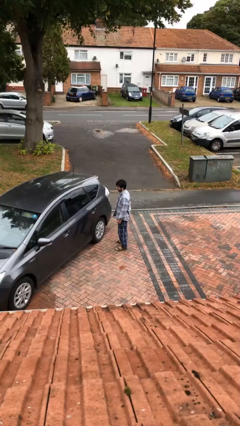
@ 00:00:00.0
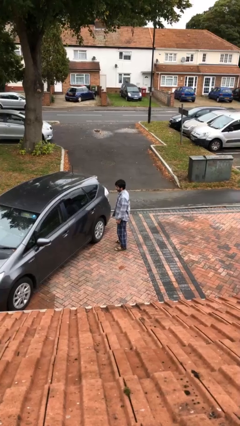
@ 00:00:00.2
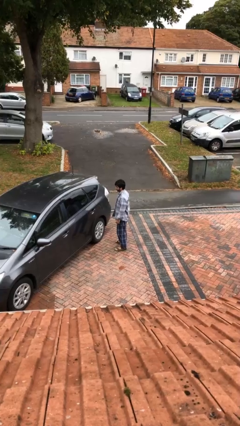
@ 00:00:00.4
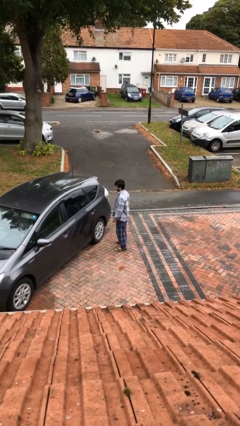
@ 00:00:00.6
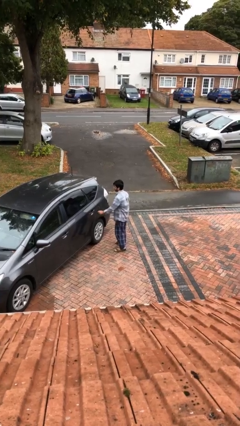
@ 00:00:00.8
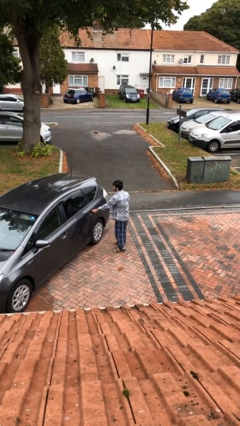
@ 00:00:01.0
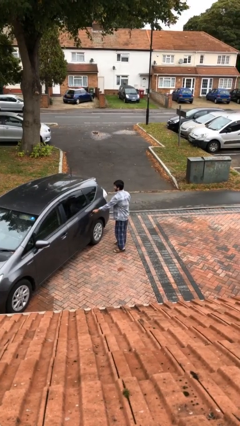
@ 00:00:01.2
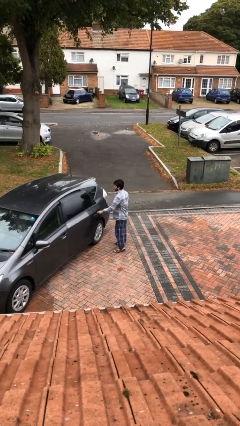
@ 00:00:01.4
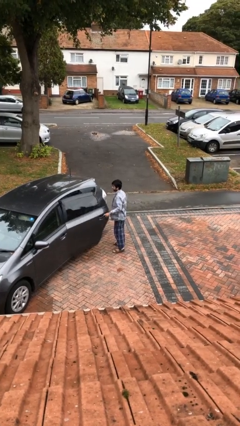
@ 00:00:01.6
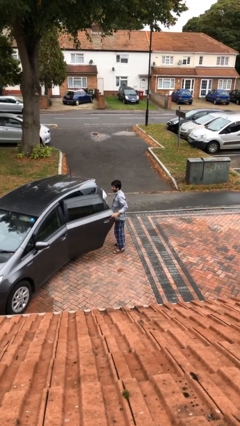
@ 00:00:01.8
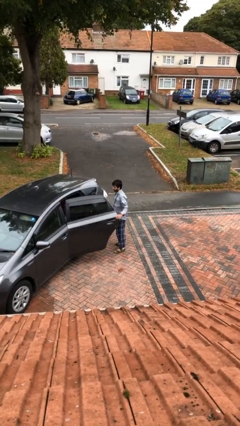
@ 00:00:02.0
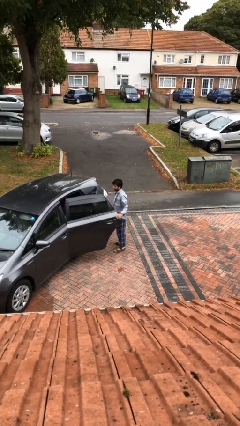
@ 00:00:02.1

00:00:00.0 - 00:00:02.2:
person opens car door

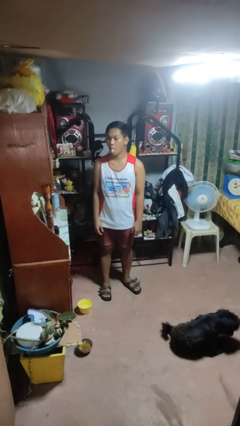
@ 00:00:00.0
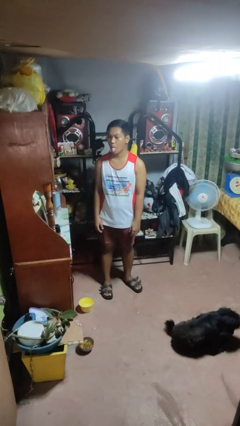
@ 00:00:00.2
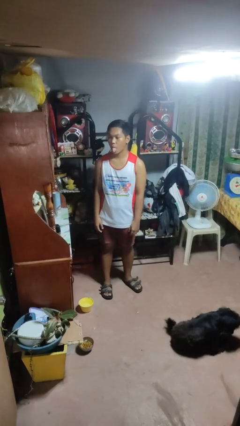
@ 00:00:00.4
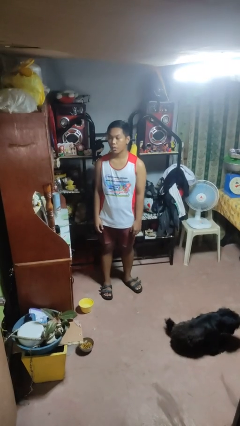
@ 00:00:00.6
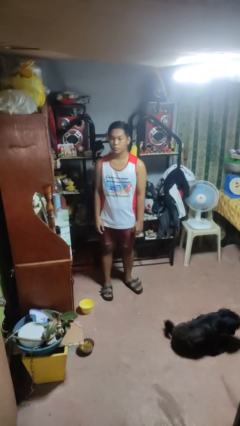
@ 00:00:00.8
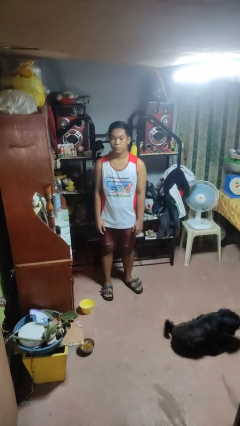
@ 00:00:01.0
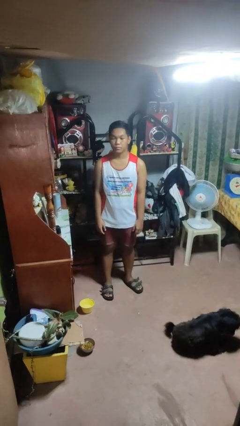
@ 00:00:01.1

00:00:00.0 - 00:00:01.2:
person sticks out tongue

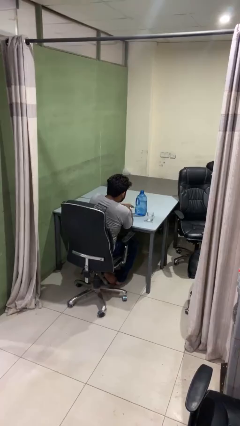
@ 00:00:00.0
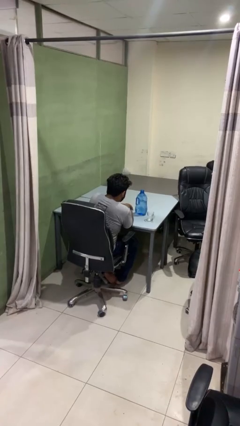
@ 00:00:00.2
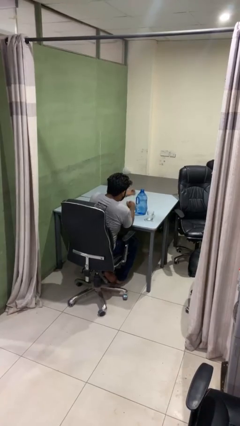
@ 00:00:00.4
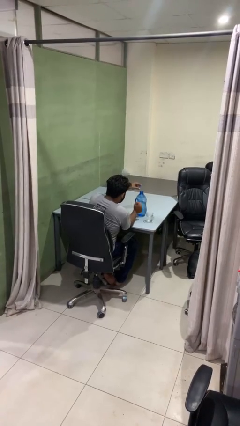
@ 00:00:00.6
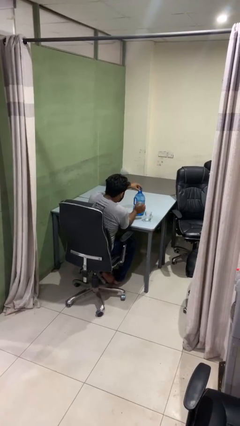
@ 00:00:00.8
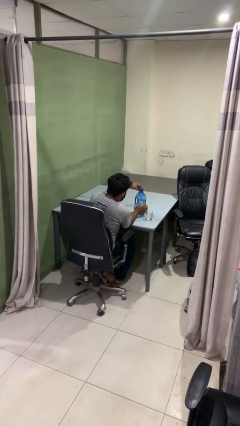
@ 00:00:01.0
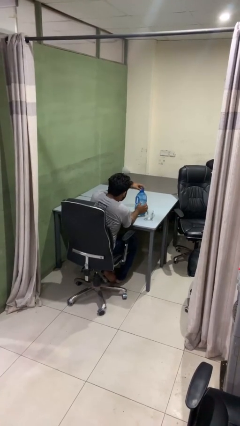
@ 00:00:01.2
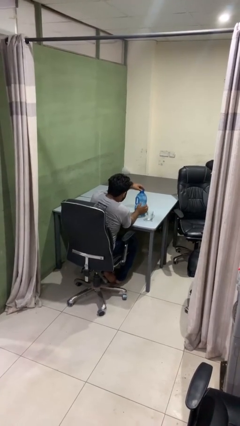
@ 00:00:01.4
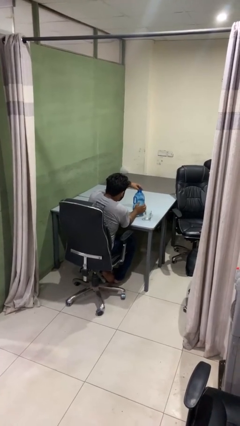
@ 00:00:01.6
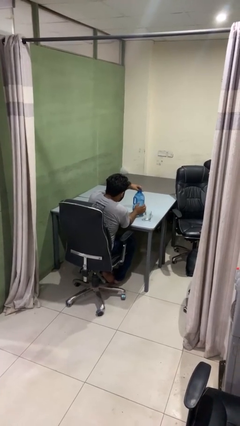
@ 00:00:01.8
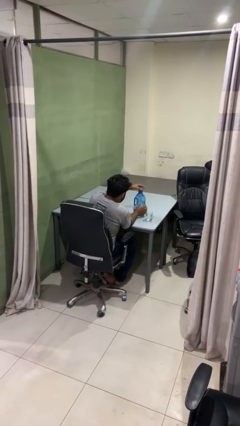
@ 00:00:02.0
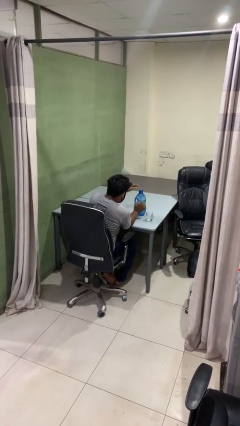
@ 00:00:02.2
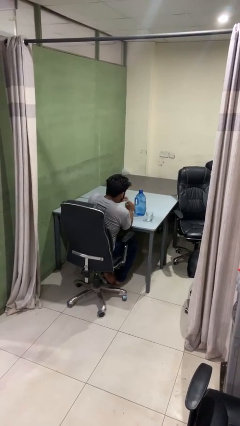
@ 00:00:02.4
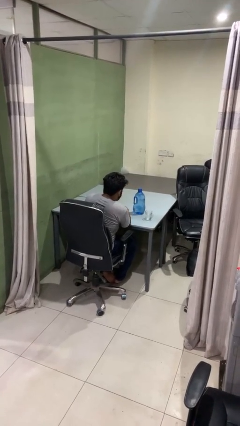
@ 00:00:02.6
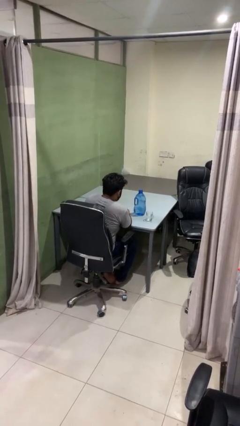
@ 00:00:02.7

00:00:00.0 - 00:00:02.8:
person screws lid to bottle

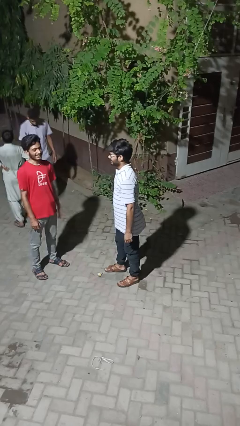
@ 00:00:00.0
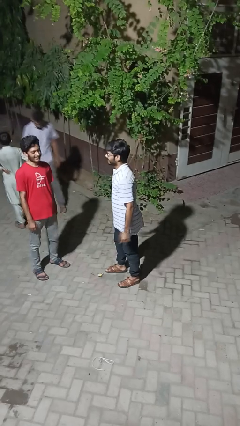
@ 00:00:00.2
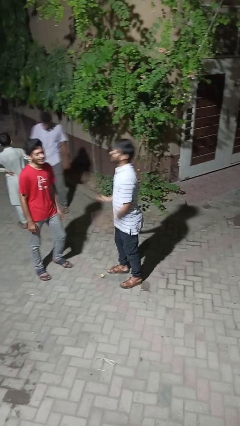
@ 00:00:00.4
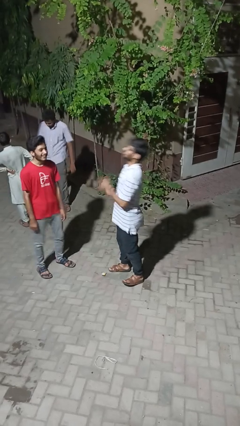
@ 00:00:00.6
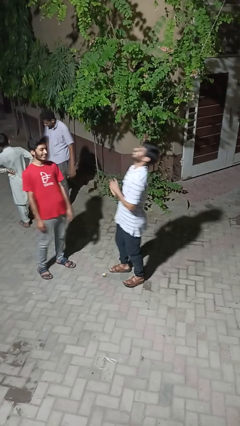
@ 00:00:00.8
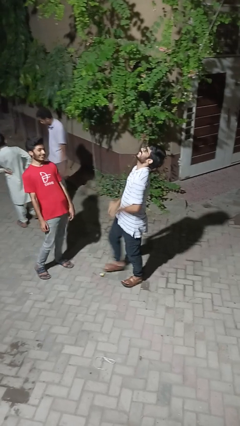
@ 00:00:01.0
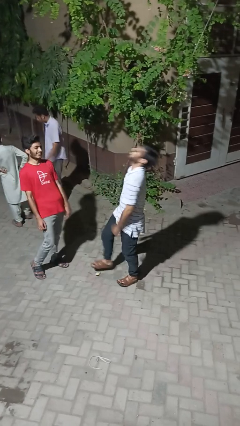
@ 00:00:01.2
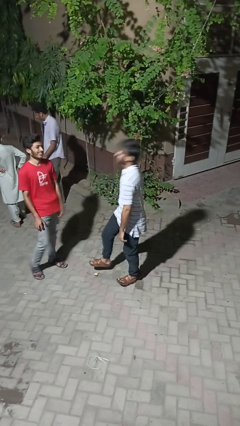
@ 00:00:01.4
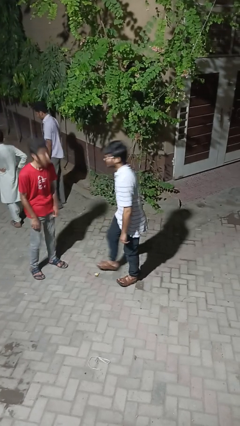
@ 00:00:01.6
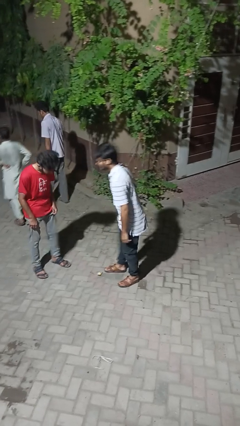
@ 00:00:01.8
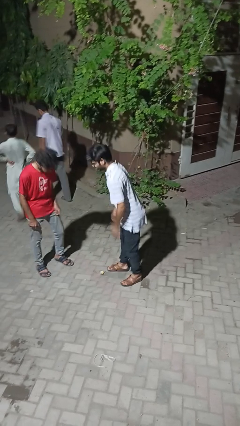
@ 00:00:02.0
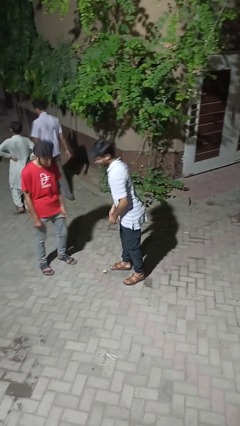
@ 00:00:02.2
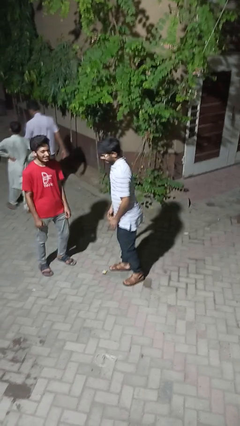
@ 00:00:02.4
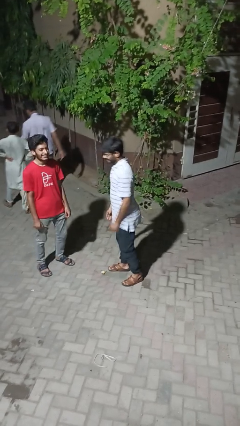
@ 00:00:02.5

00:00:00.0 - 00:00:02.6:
person laughs with person

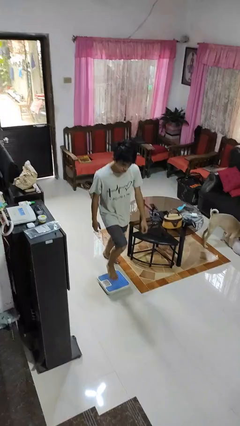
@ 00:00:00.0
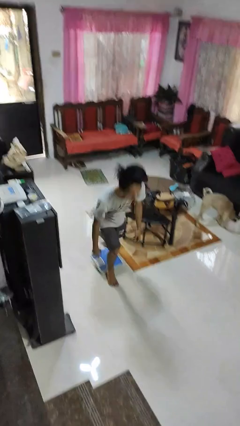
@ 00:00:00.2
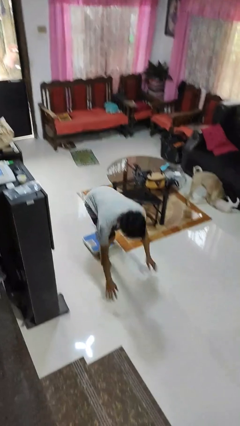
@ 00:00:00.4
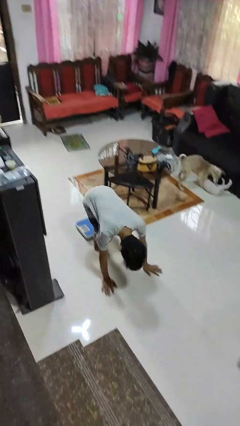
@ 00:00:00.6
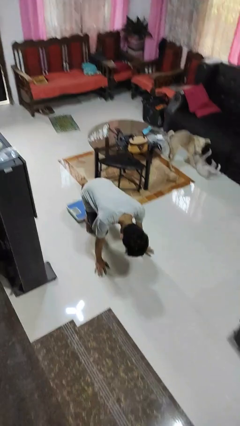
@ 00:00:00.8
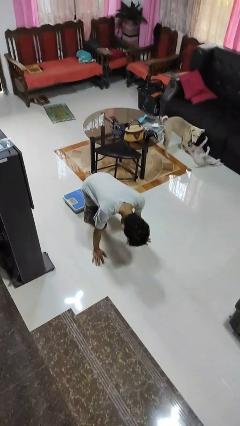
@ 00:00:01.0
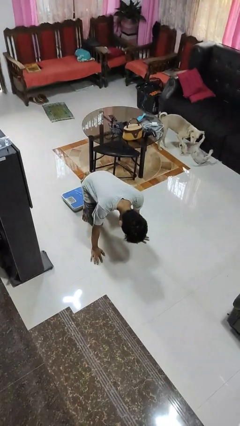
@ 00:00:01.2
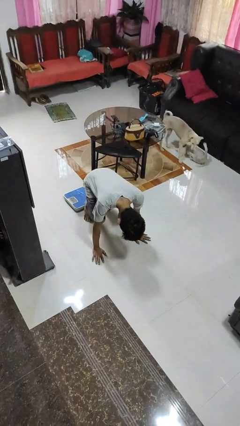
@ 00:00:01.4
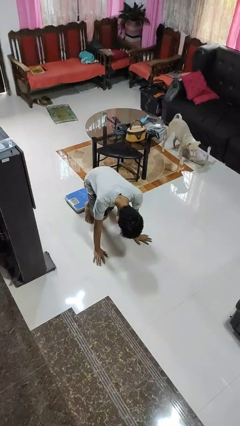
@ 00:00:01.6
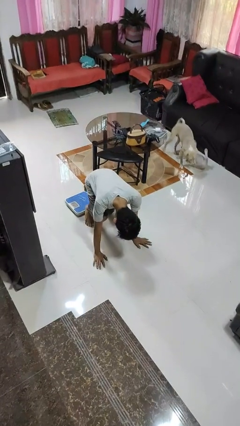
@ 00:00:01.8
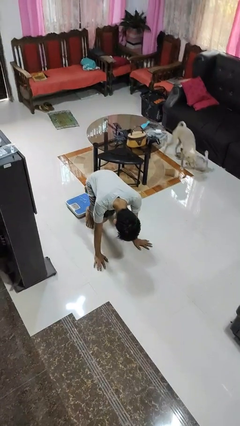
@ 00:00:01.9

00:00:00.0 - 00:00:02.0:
person trips on object on floor

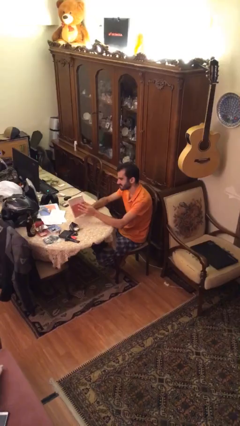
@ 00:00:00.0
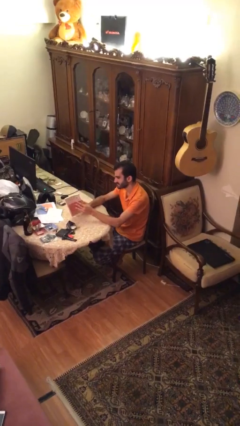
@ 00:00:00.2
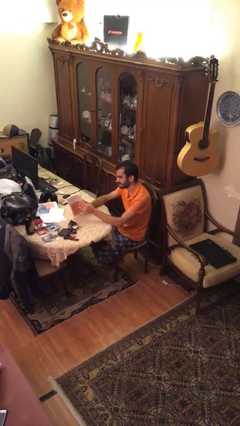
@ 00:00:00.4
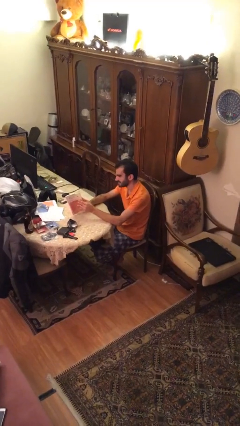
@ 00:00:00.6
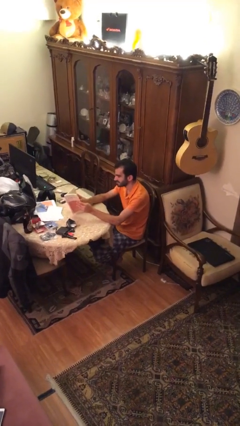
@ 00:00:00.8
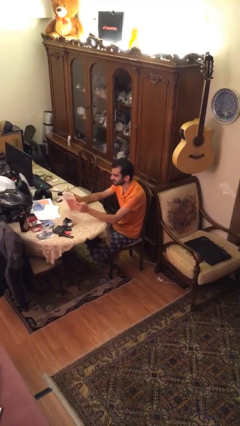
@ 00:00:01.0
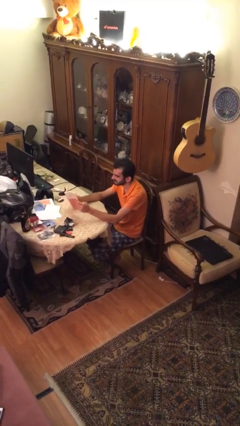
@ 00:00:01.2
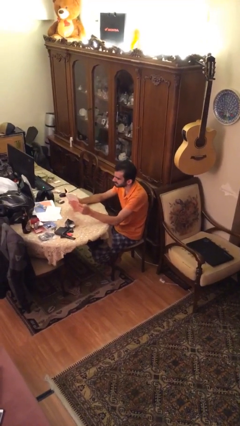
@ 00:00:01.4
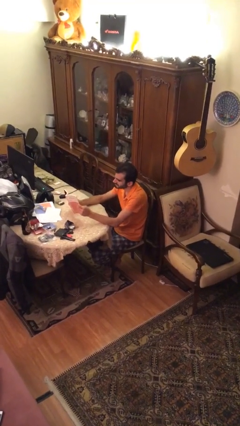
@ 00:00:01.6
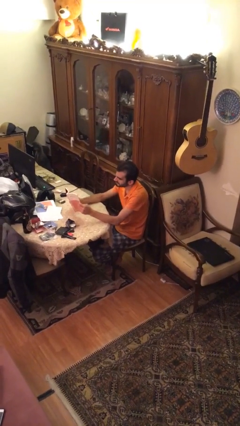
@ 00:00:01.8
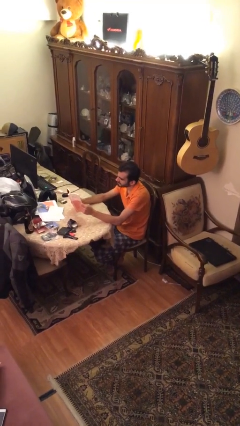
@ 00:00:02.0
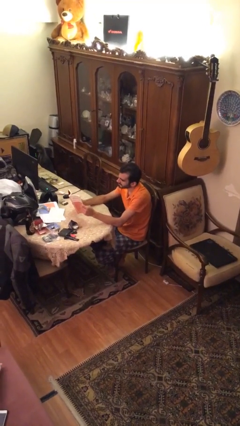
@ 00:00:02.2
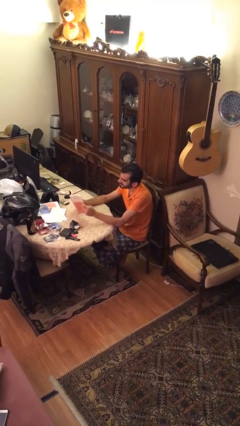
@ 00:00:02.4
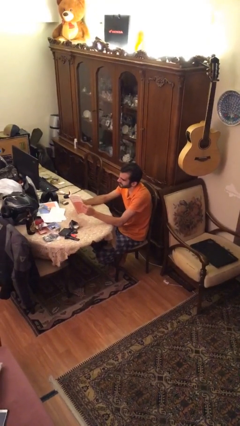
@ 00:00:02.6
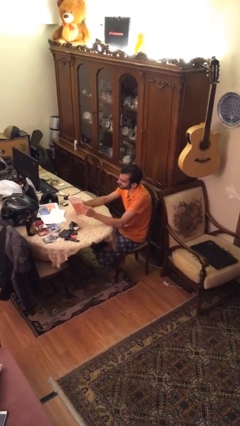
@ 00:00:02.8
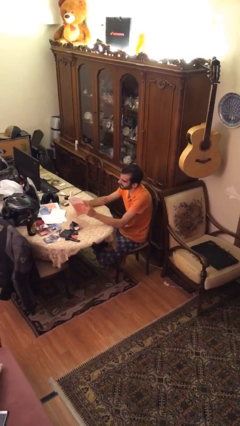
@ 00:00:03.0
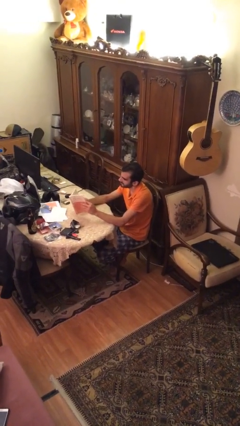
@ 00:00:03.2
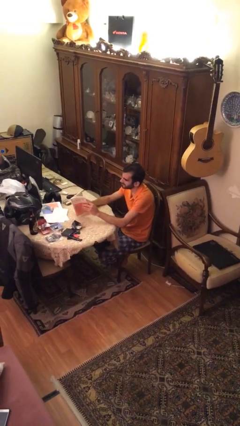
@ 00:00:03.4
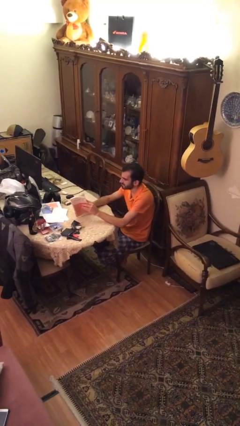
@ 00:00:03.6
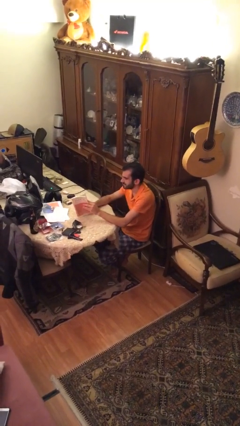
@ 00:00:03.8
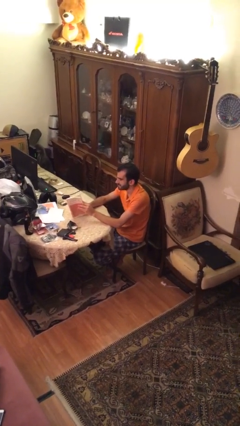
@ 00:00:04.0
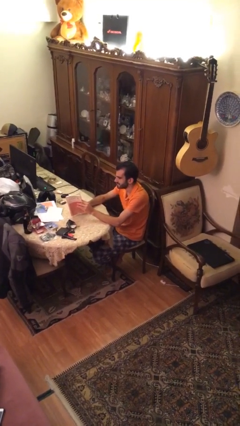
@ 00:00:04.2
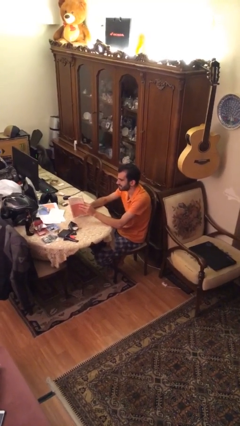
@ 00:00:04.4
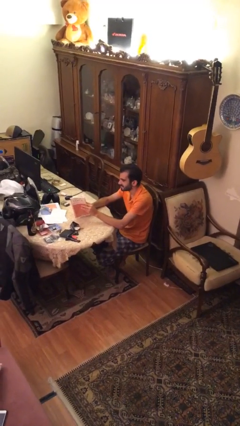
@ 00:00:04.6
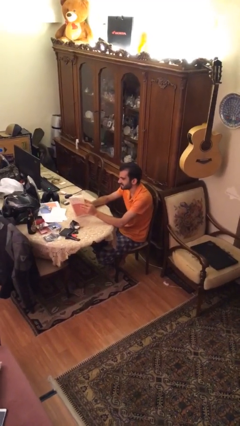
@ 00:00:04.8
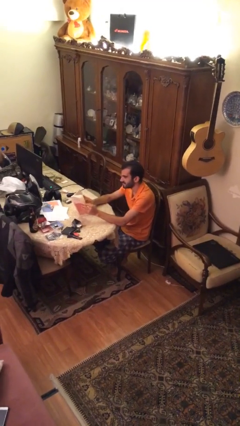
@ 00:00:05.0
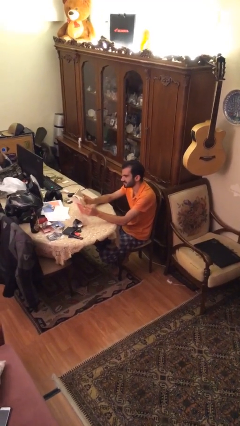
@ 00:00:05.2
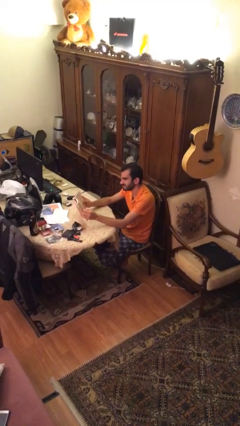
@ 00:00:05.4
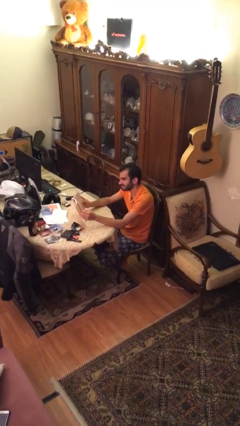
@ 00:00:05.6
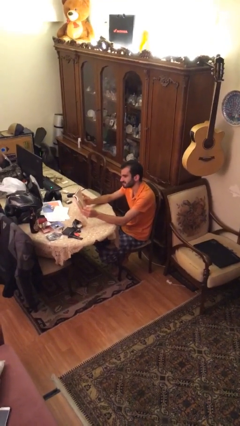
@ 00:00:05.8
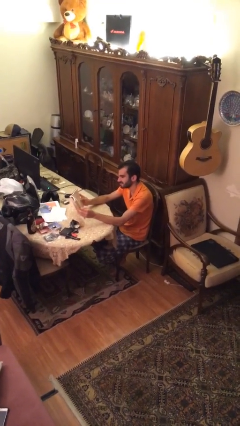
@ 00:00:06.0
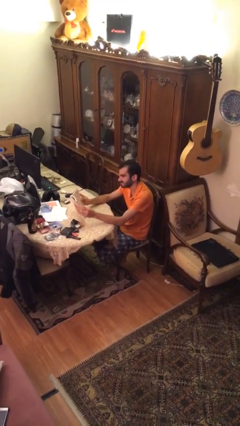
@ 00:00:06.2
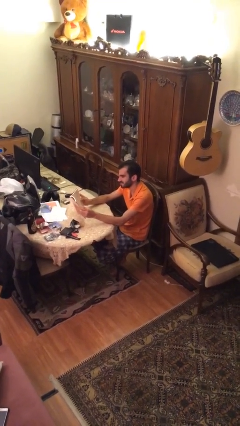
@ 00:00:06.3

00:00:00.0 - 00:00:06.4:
person reads document
